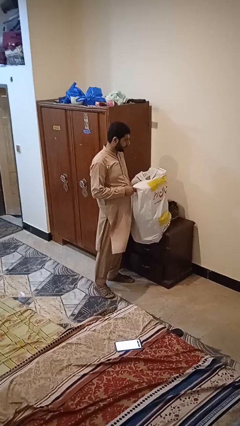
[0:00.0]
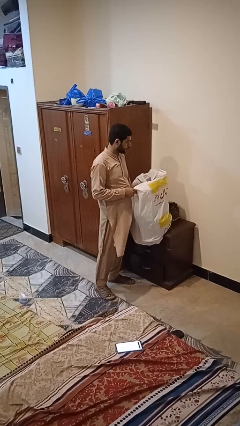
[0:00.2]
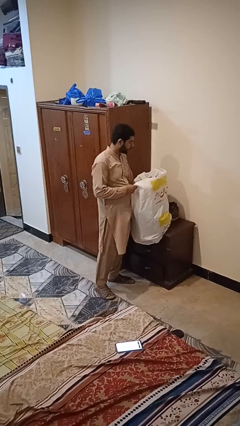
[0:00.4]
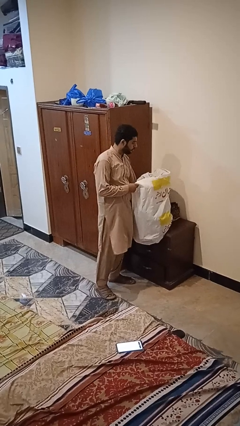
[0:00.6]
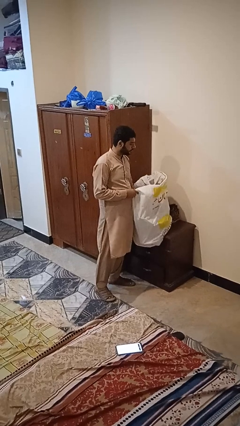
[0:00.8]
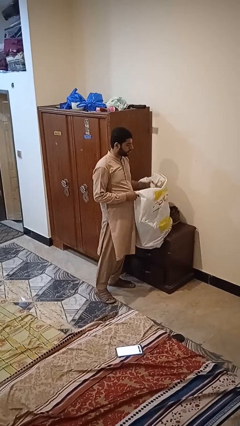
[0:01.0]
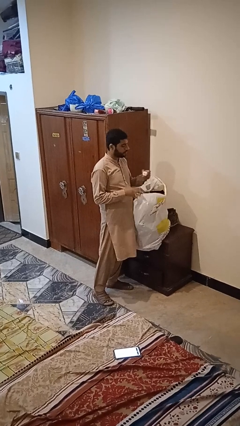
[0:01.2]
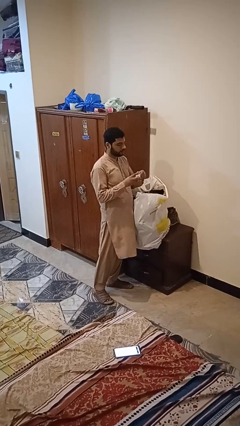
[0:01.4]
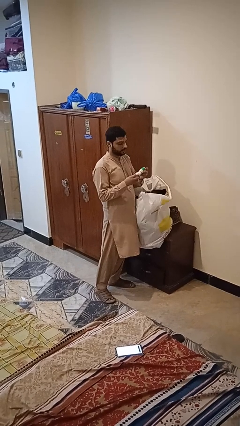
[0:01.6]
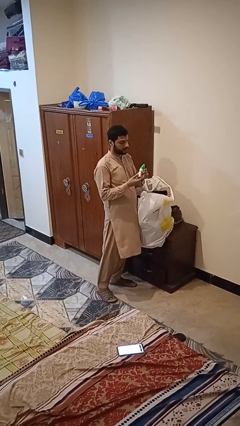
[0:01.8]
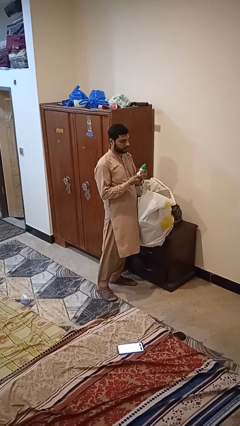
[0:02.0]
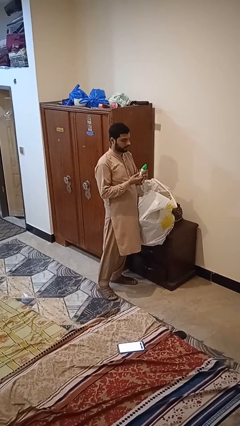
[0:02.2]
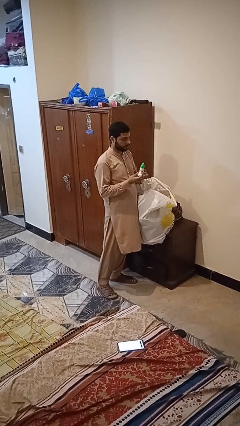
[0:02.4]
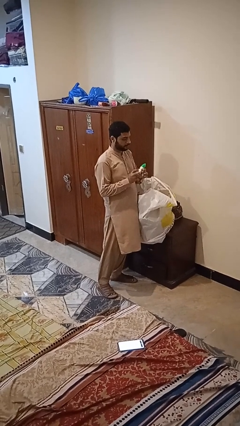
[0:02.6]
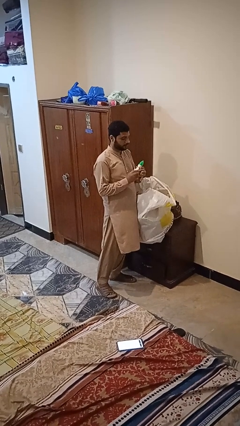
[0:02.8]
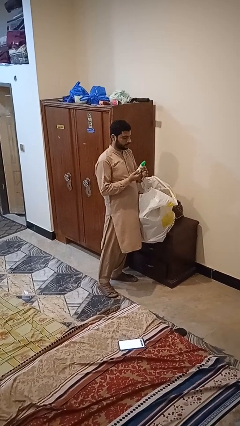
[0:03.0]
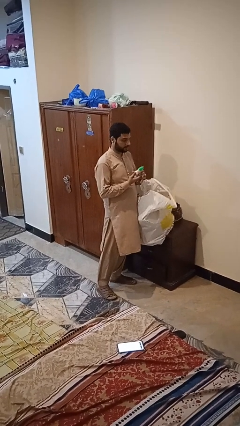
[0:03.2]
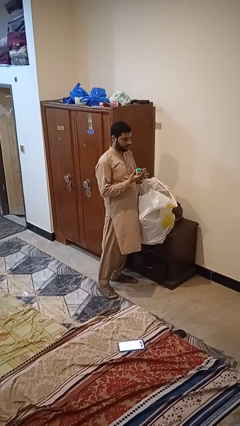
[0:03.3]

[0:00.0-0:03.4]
person takes object from bag

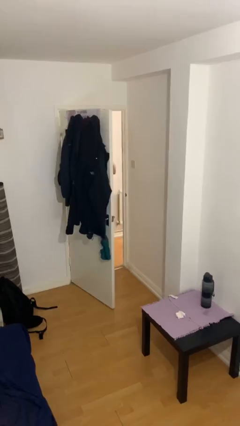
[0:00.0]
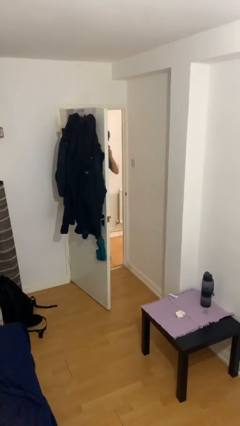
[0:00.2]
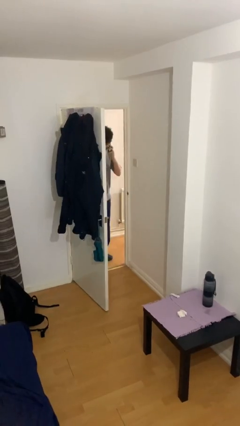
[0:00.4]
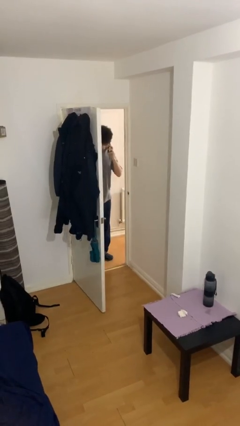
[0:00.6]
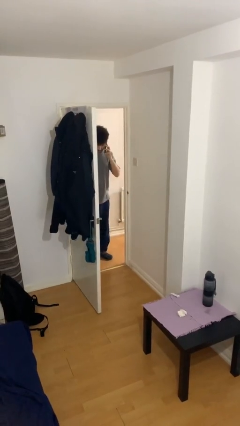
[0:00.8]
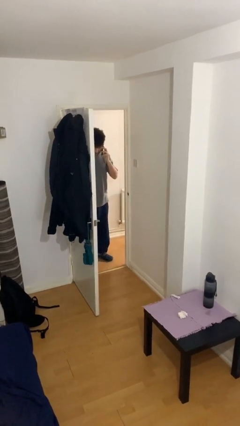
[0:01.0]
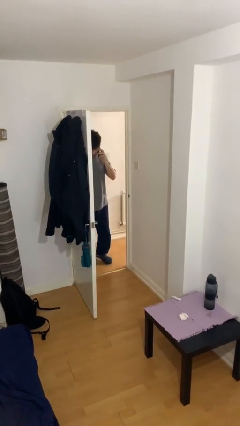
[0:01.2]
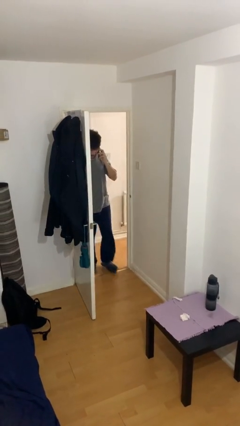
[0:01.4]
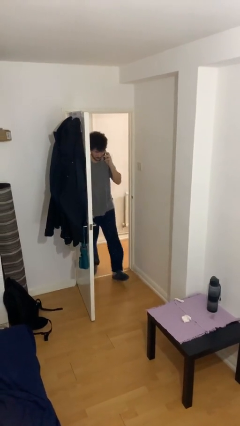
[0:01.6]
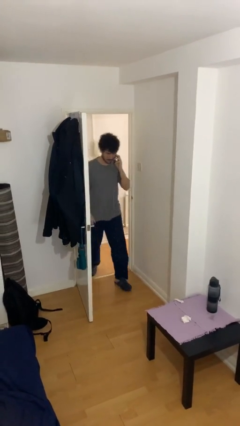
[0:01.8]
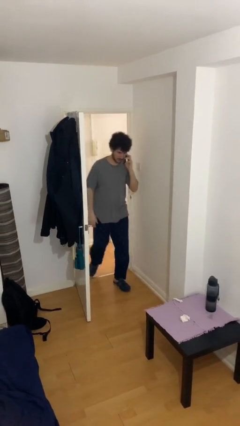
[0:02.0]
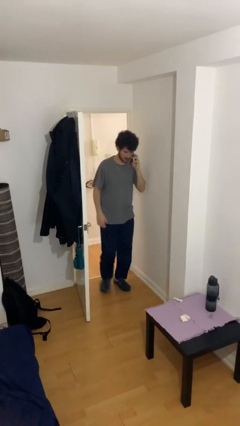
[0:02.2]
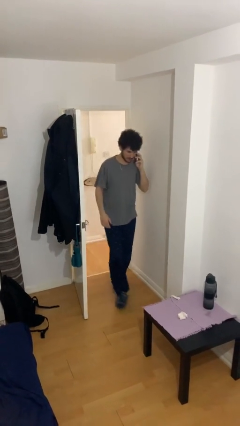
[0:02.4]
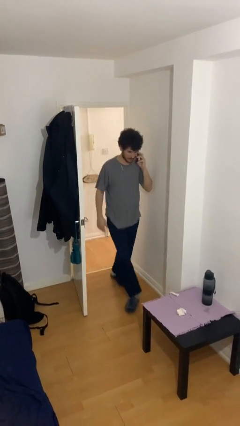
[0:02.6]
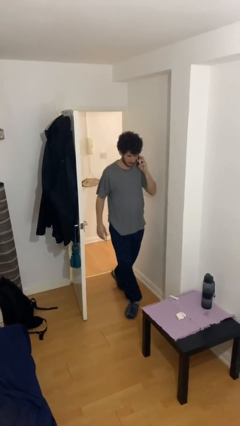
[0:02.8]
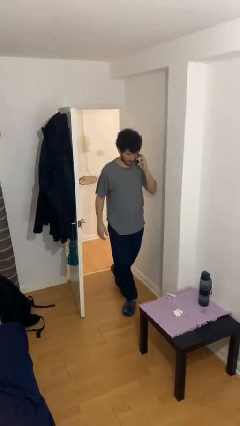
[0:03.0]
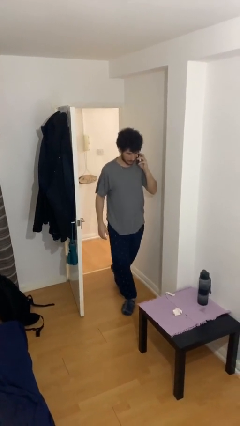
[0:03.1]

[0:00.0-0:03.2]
person enters scene through structure

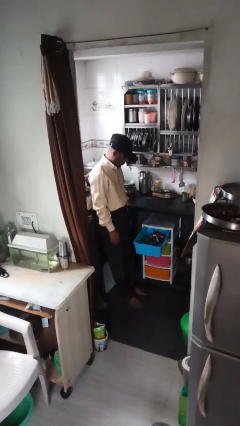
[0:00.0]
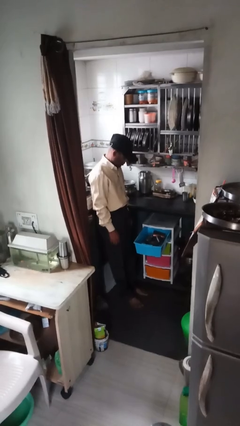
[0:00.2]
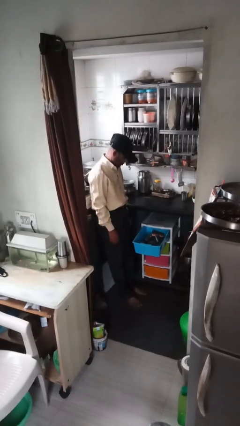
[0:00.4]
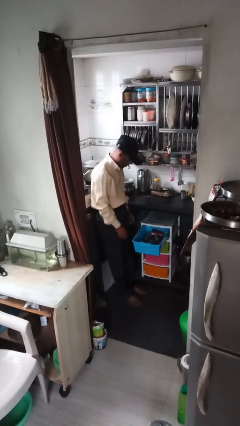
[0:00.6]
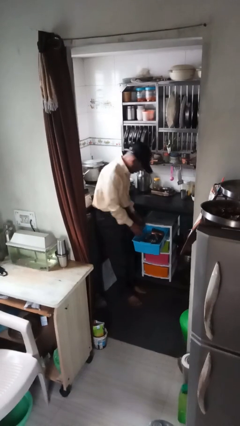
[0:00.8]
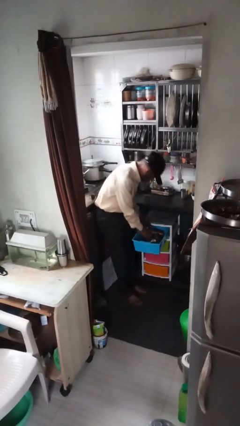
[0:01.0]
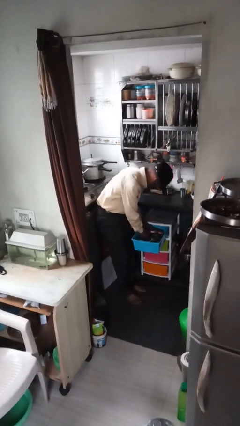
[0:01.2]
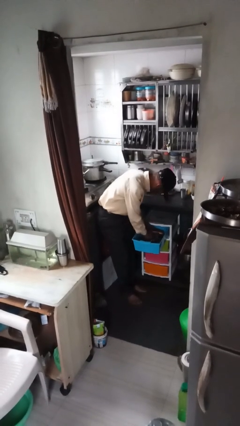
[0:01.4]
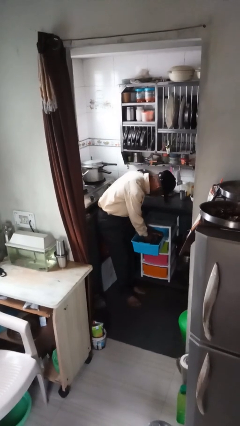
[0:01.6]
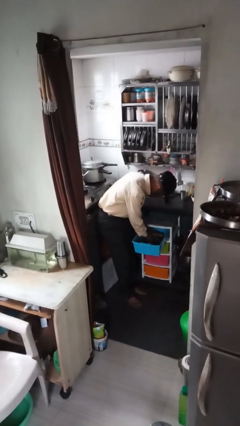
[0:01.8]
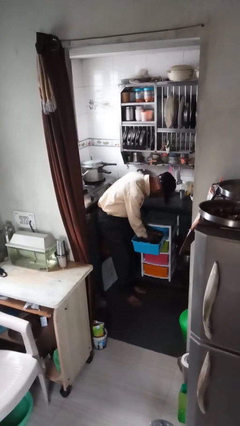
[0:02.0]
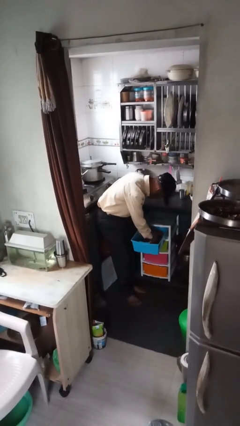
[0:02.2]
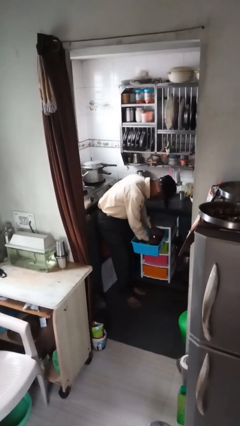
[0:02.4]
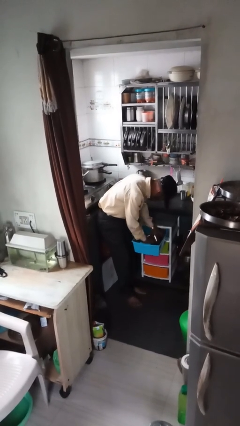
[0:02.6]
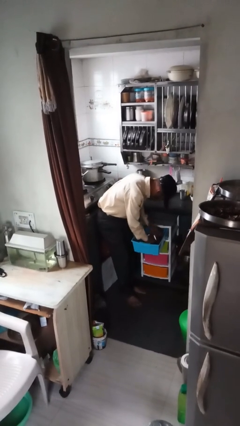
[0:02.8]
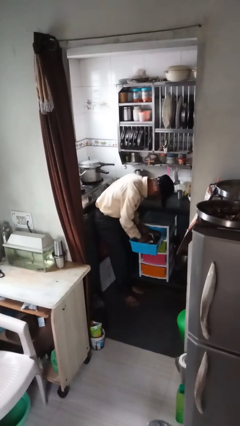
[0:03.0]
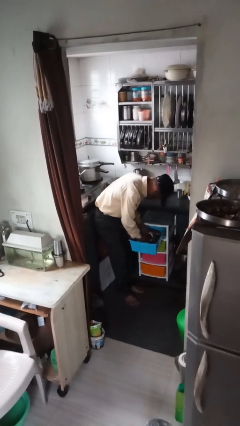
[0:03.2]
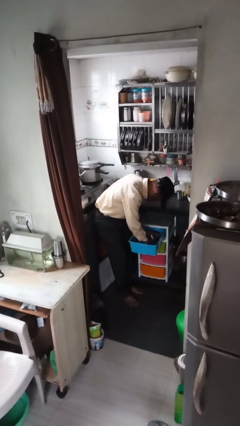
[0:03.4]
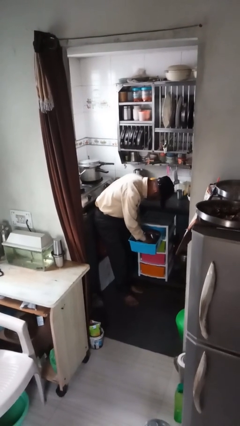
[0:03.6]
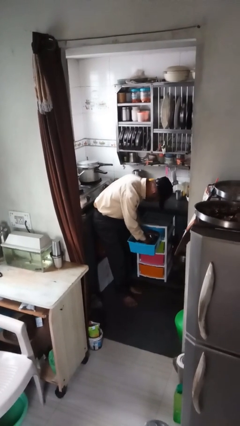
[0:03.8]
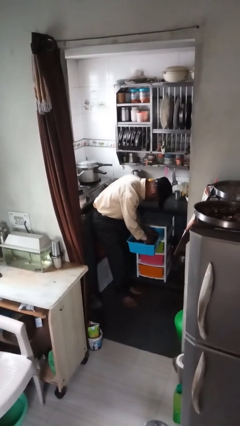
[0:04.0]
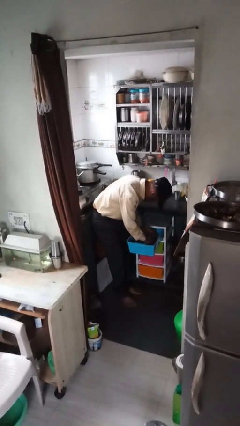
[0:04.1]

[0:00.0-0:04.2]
person searches in kitchen drawer

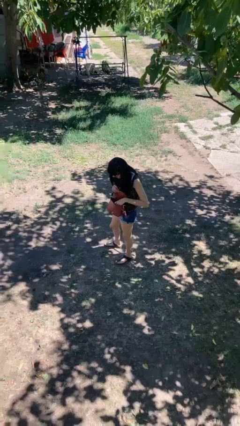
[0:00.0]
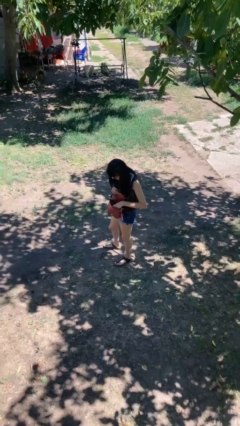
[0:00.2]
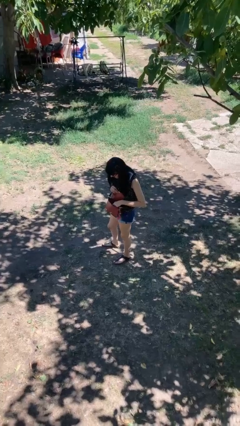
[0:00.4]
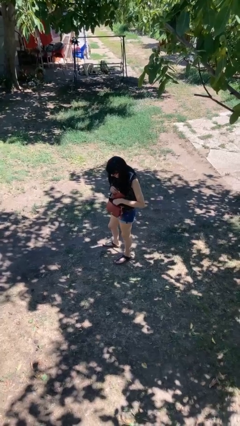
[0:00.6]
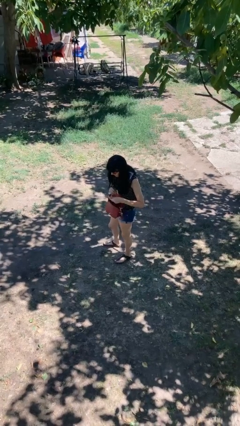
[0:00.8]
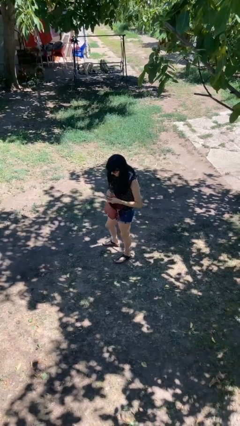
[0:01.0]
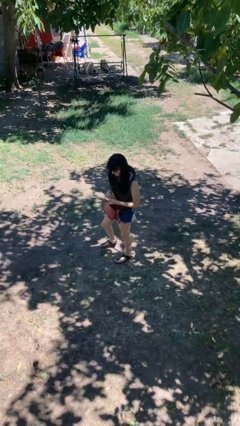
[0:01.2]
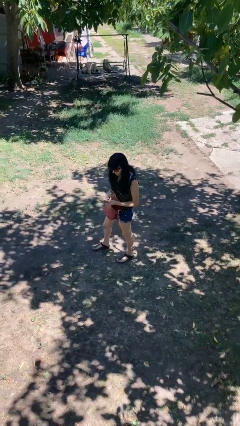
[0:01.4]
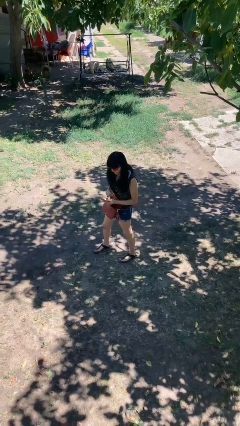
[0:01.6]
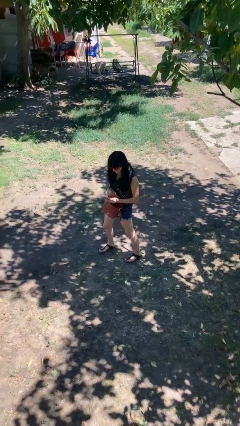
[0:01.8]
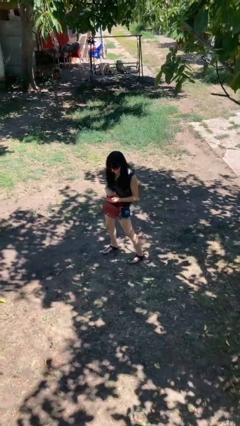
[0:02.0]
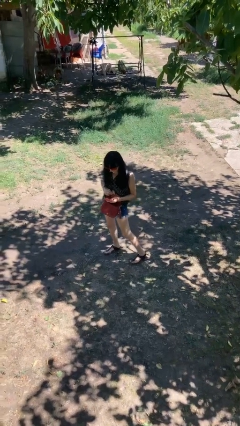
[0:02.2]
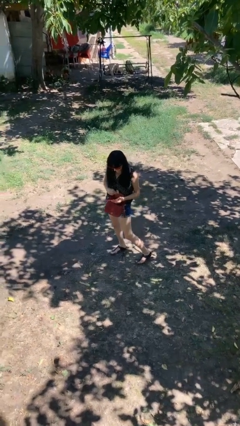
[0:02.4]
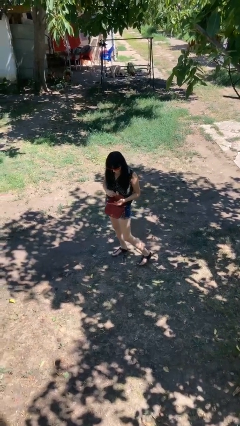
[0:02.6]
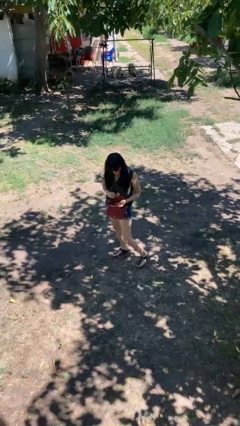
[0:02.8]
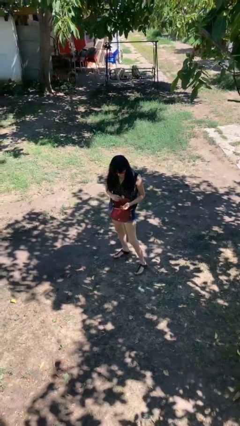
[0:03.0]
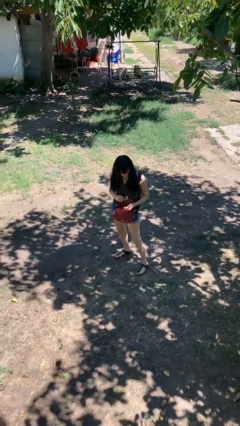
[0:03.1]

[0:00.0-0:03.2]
person takes object from purse

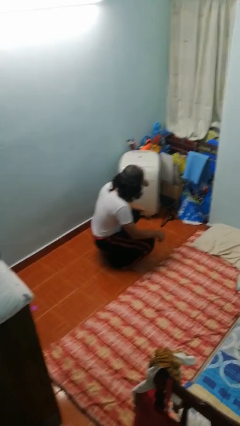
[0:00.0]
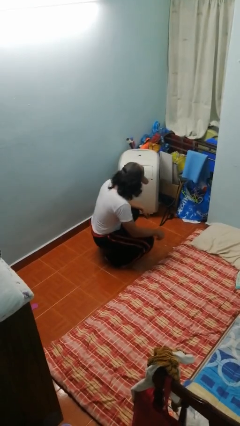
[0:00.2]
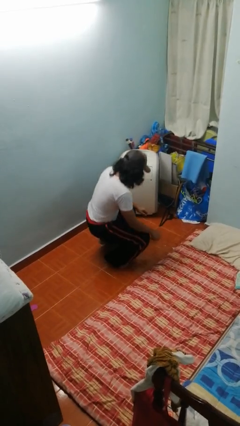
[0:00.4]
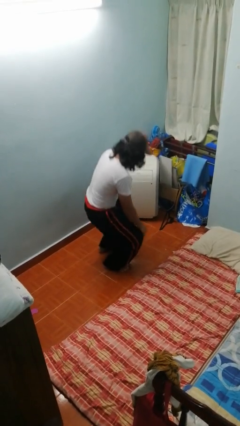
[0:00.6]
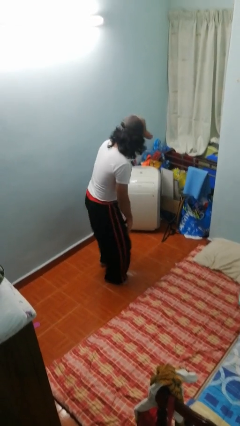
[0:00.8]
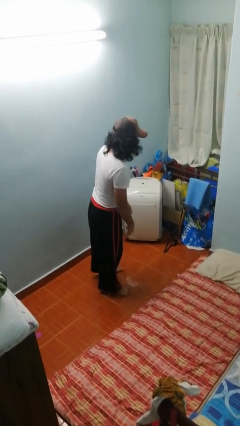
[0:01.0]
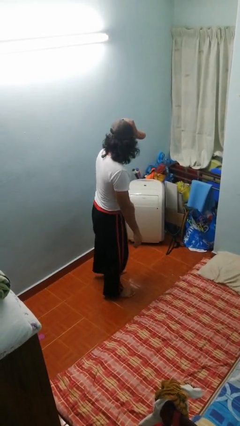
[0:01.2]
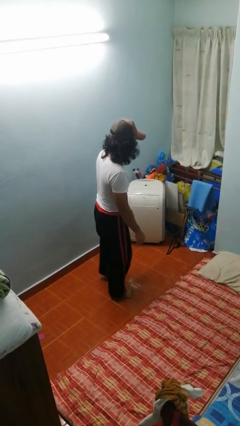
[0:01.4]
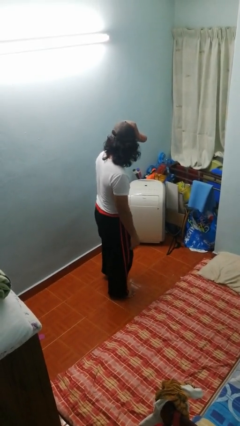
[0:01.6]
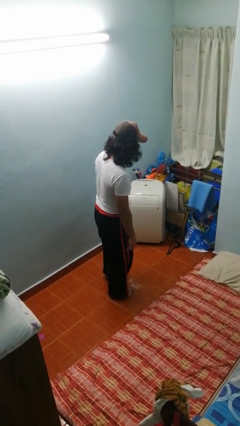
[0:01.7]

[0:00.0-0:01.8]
person stands up

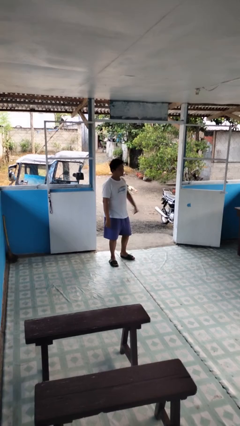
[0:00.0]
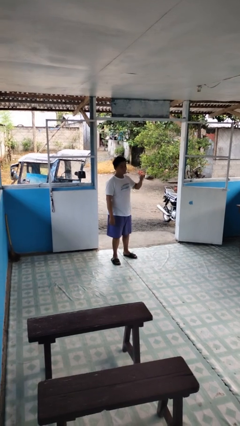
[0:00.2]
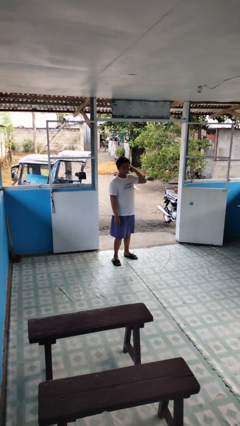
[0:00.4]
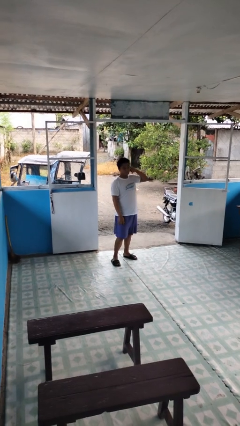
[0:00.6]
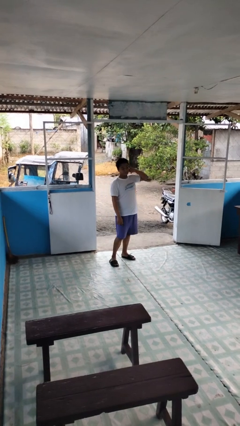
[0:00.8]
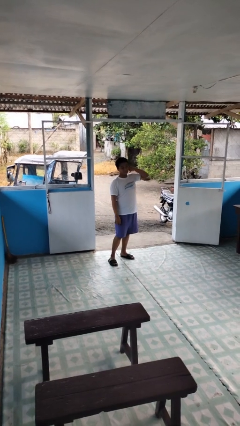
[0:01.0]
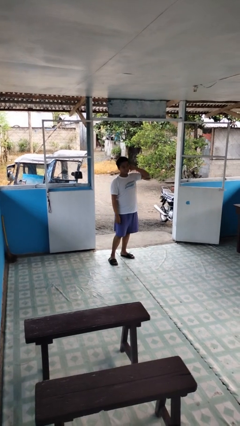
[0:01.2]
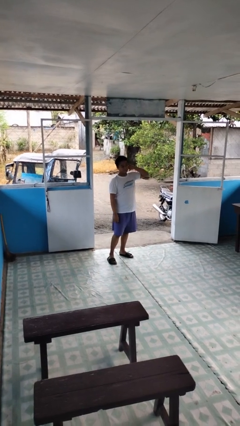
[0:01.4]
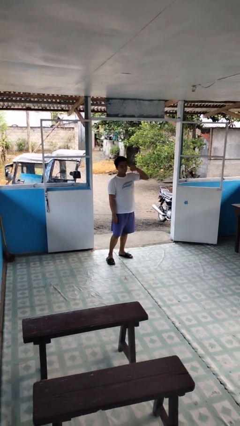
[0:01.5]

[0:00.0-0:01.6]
person gestures call me

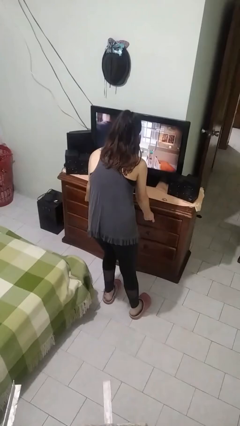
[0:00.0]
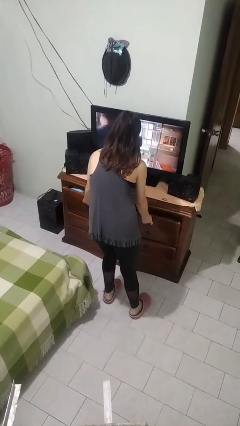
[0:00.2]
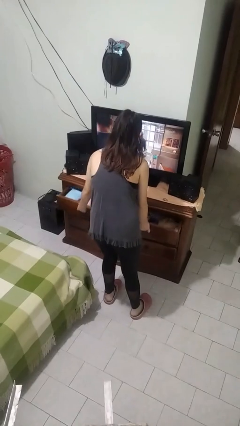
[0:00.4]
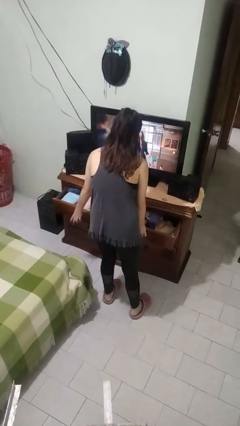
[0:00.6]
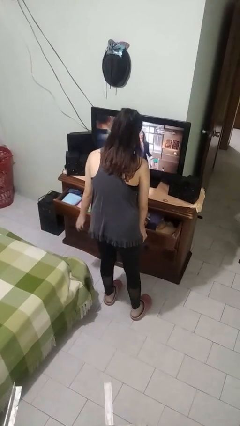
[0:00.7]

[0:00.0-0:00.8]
person opens dresser drawer
